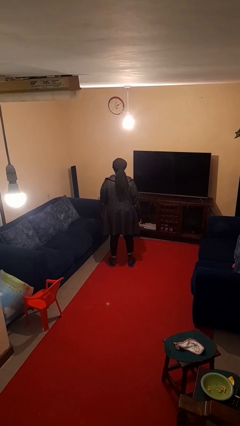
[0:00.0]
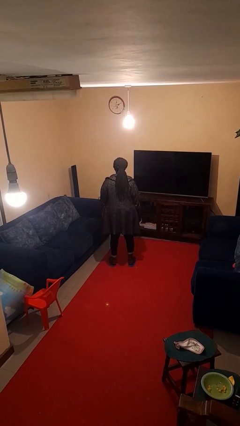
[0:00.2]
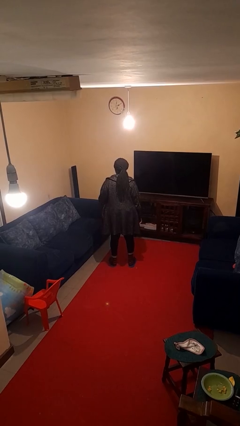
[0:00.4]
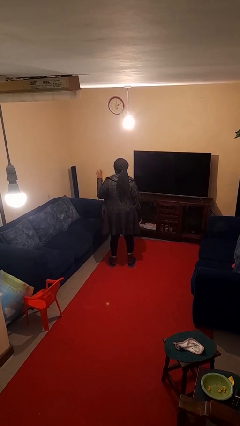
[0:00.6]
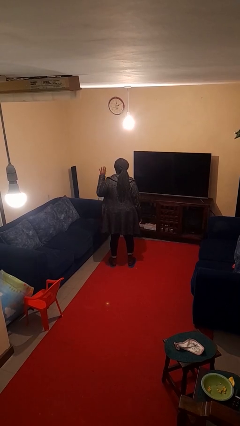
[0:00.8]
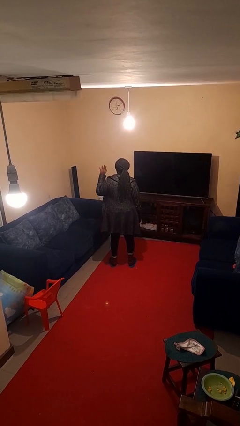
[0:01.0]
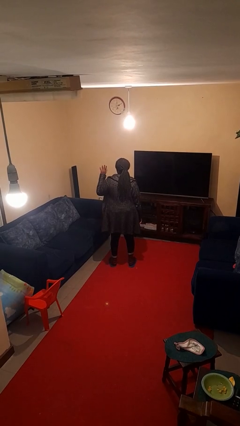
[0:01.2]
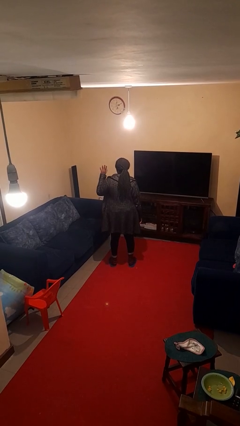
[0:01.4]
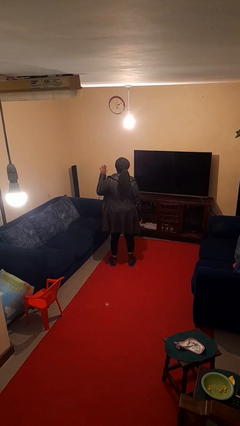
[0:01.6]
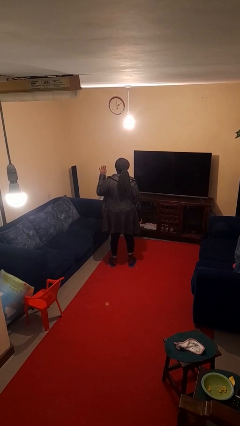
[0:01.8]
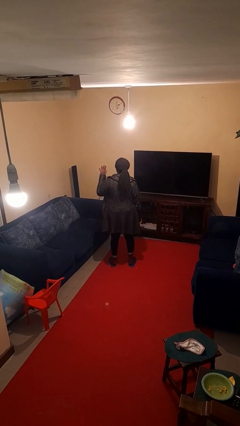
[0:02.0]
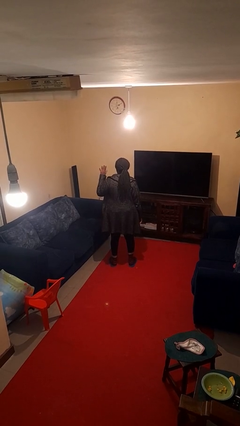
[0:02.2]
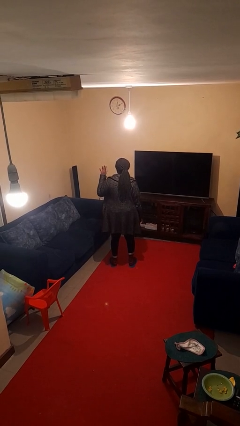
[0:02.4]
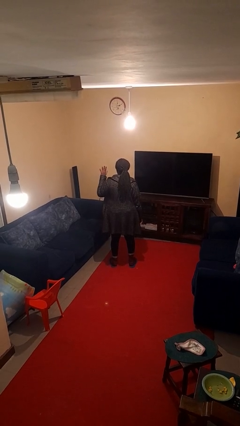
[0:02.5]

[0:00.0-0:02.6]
person gestures number five

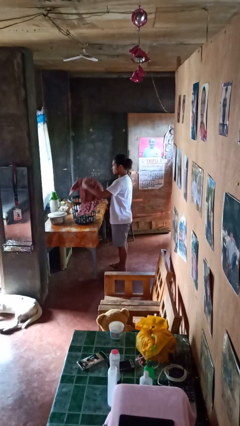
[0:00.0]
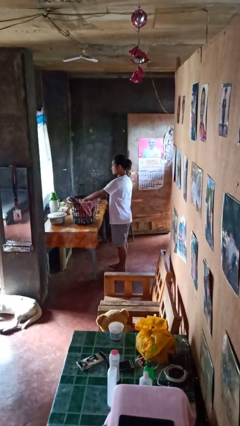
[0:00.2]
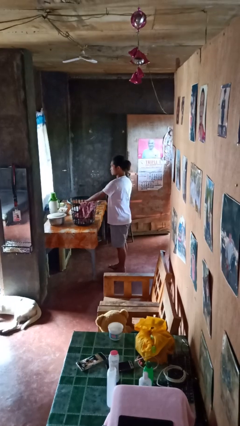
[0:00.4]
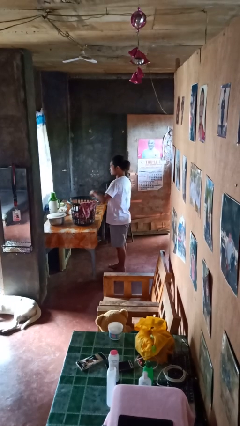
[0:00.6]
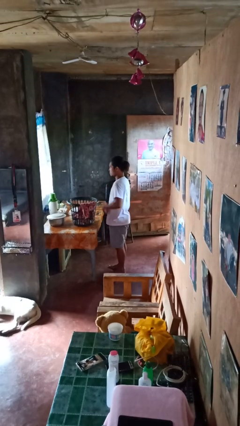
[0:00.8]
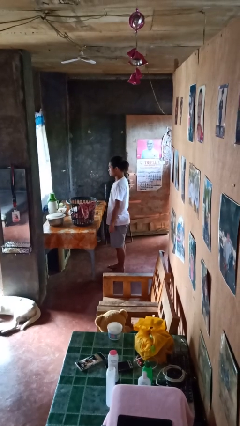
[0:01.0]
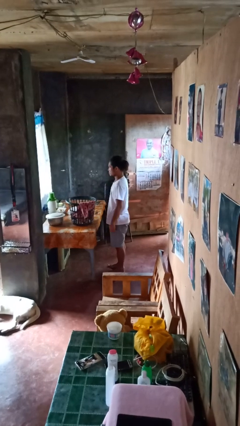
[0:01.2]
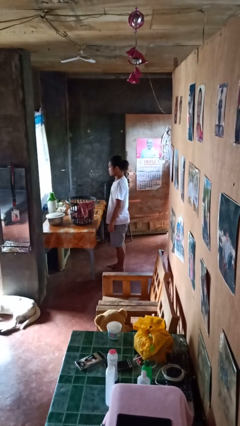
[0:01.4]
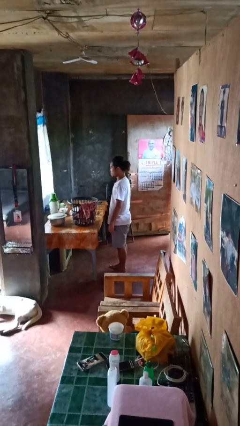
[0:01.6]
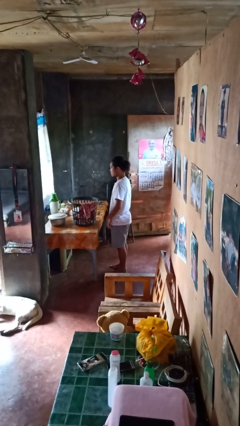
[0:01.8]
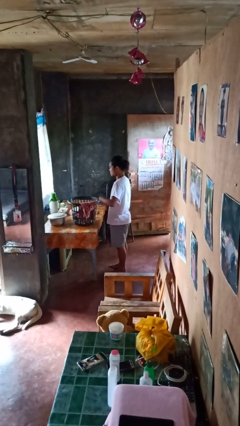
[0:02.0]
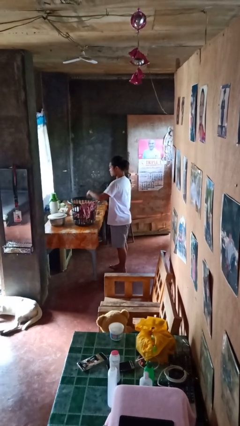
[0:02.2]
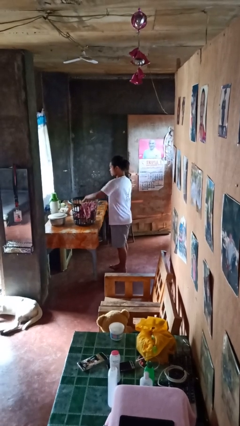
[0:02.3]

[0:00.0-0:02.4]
person puts object into basket

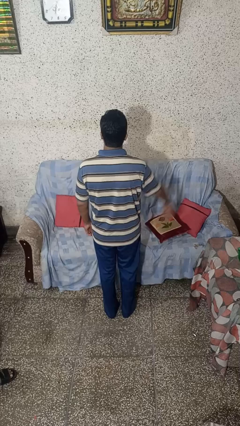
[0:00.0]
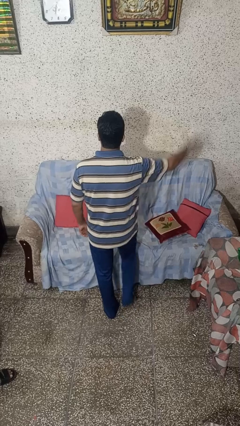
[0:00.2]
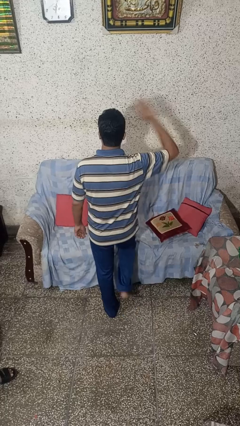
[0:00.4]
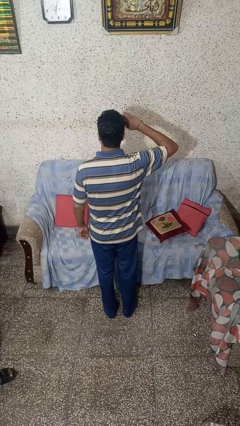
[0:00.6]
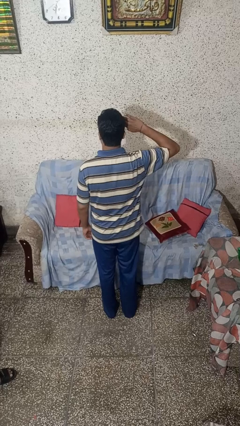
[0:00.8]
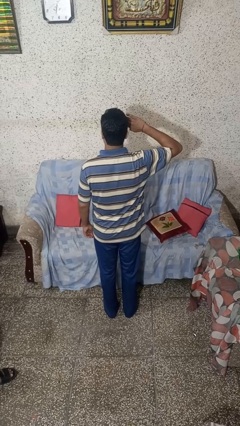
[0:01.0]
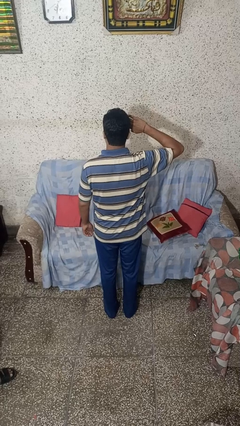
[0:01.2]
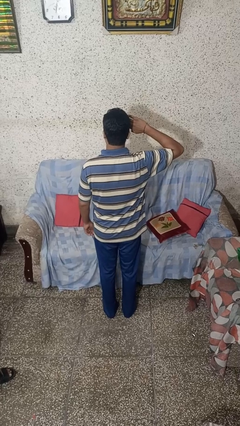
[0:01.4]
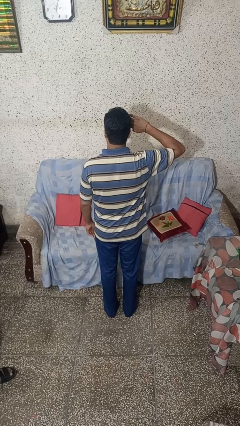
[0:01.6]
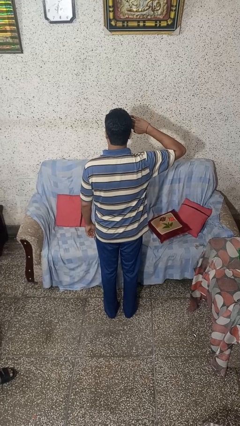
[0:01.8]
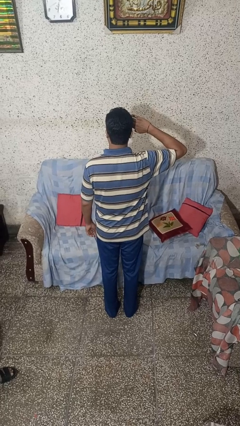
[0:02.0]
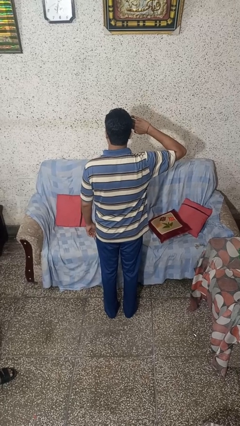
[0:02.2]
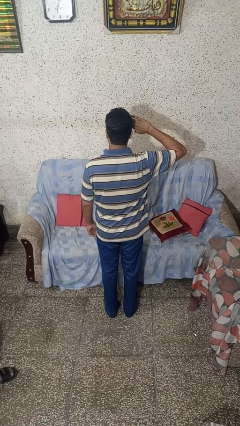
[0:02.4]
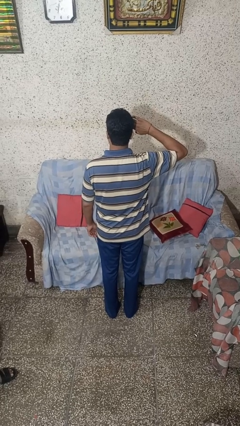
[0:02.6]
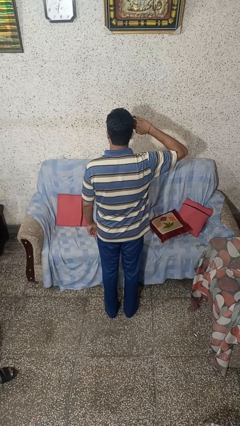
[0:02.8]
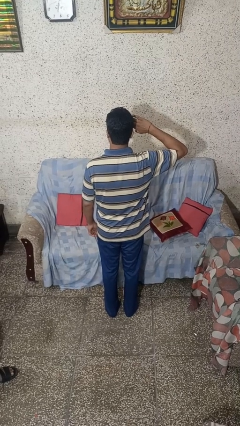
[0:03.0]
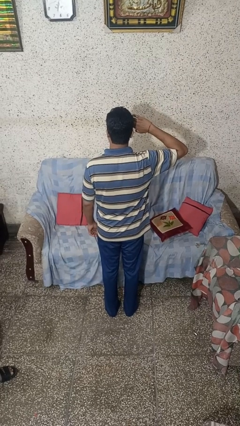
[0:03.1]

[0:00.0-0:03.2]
person salutes

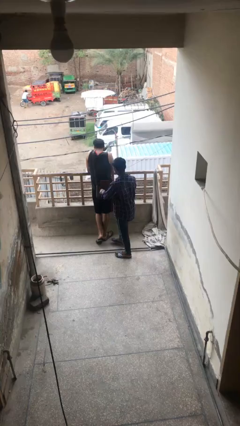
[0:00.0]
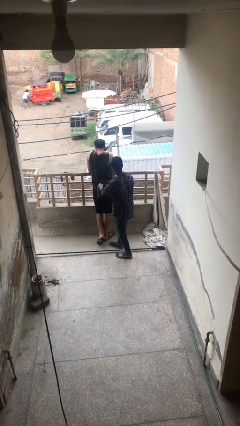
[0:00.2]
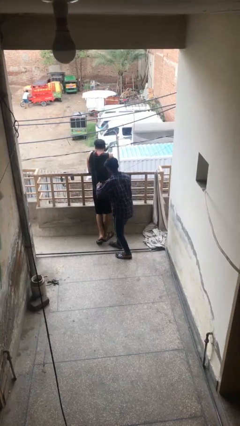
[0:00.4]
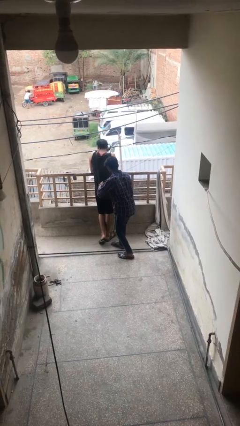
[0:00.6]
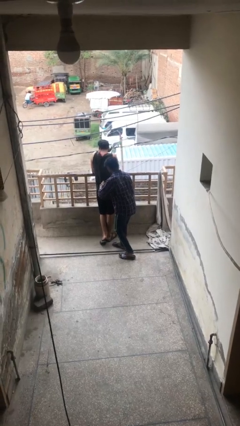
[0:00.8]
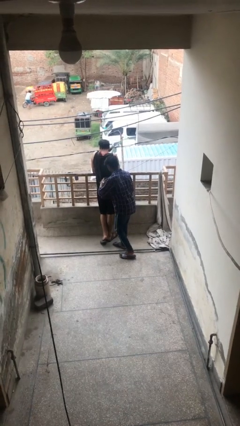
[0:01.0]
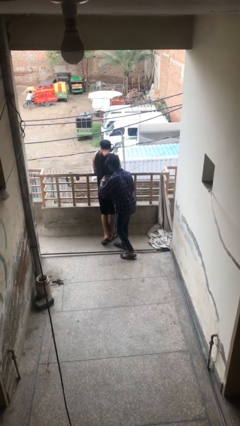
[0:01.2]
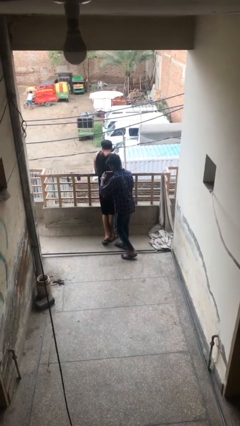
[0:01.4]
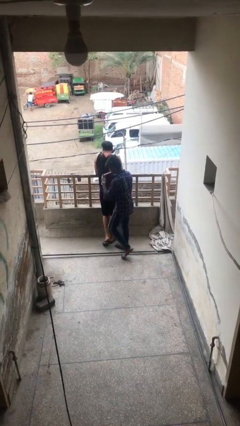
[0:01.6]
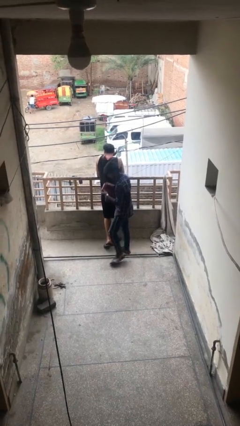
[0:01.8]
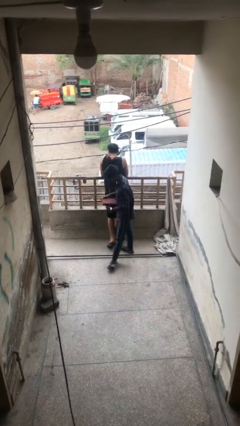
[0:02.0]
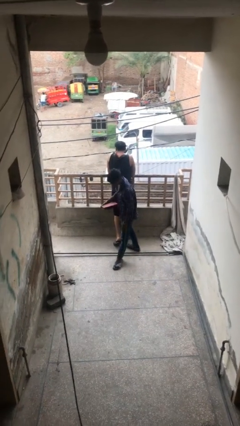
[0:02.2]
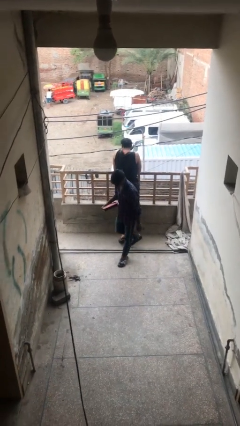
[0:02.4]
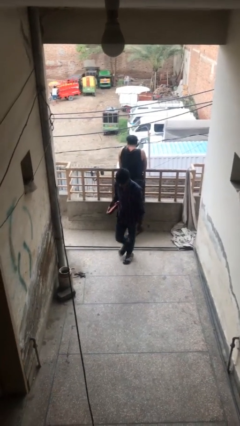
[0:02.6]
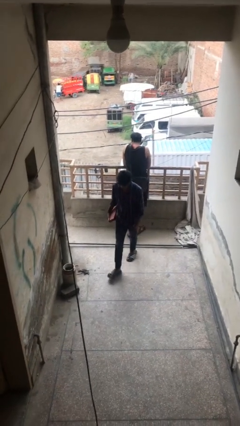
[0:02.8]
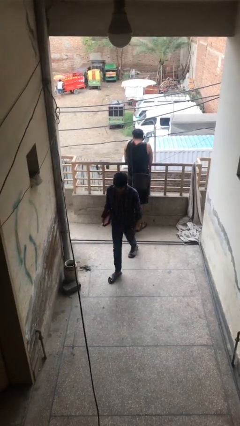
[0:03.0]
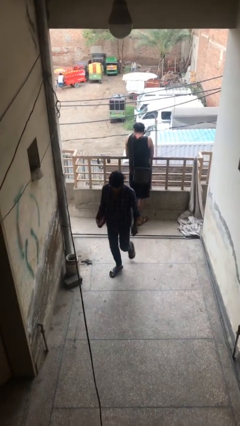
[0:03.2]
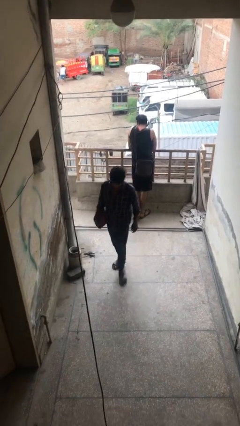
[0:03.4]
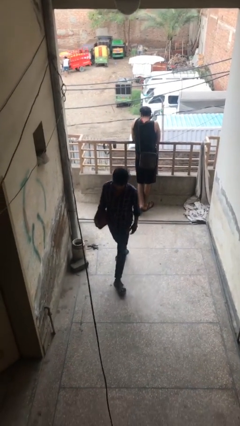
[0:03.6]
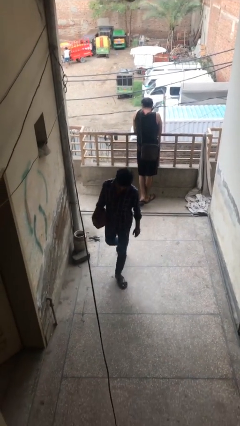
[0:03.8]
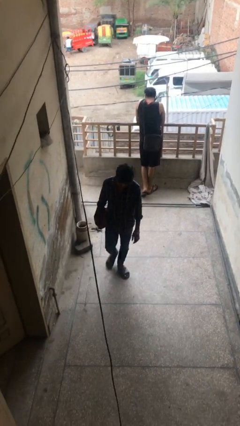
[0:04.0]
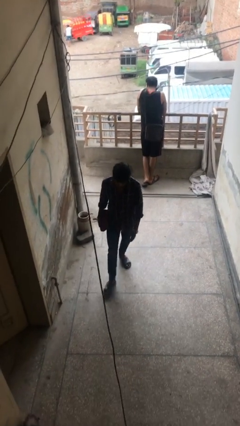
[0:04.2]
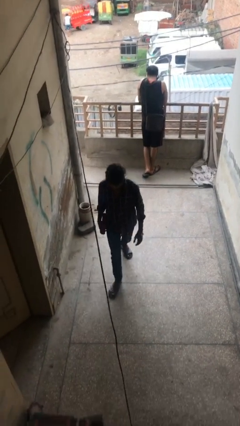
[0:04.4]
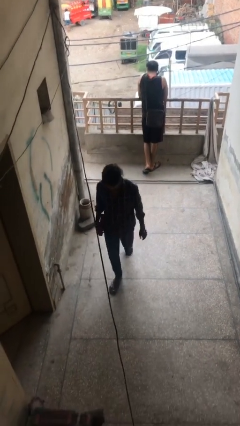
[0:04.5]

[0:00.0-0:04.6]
person steals object from person

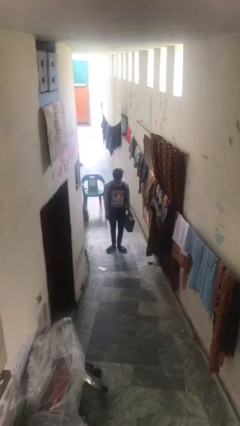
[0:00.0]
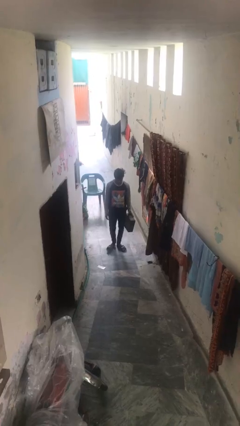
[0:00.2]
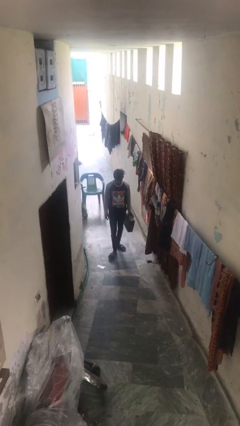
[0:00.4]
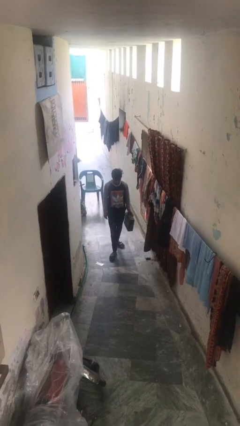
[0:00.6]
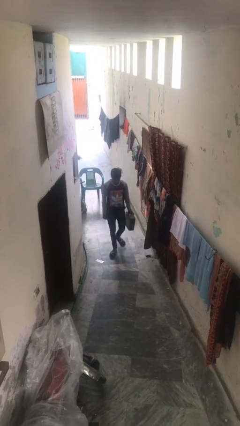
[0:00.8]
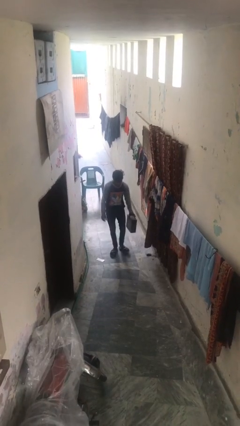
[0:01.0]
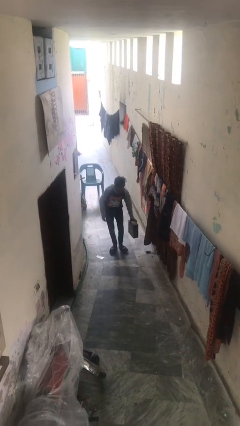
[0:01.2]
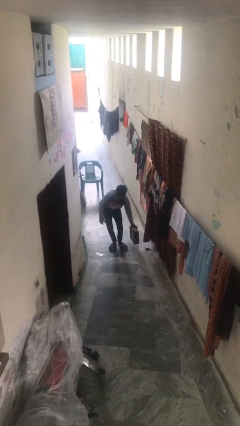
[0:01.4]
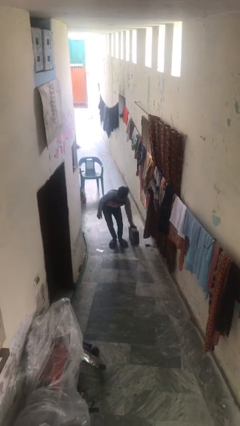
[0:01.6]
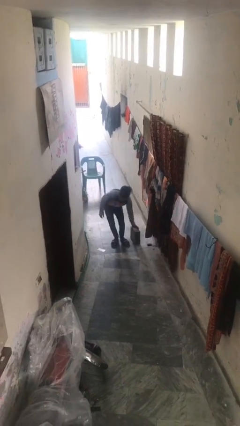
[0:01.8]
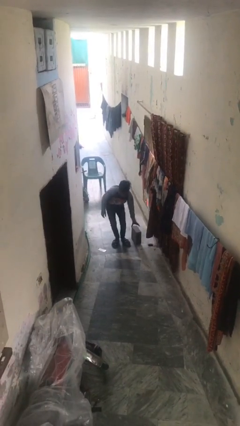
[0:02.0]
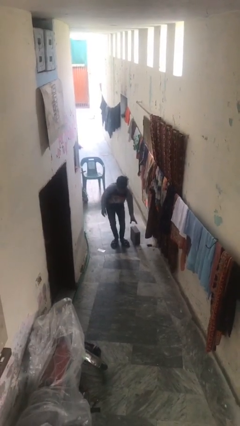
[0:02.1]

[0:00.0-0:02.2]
person puts down object on floor

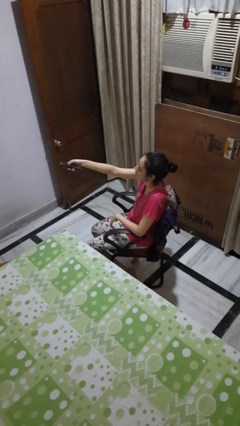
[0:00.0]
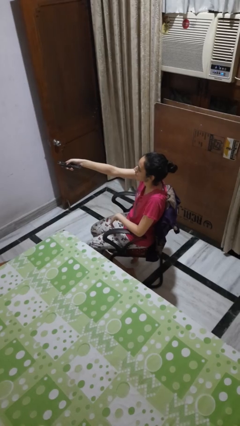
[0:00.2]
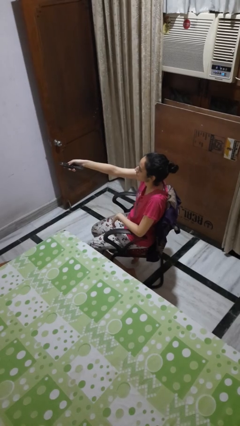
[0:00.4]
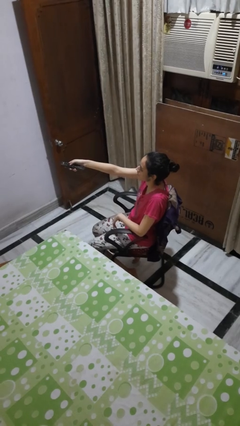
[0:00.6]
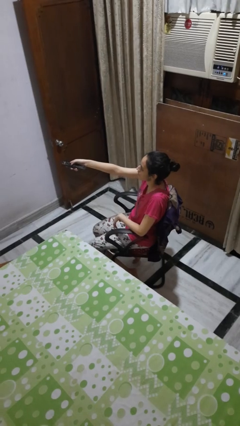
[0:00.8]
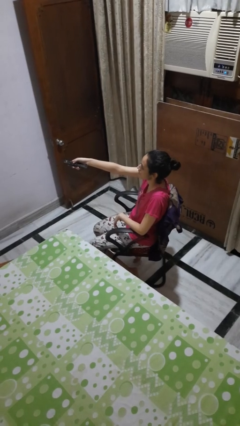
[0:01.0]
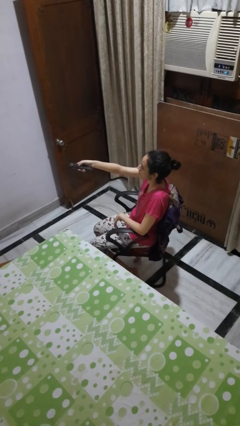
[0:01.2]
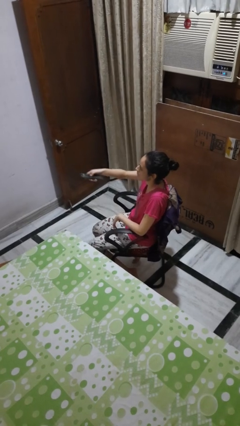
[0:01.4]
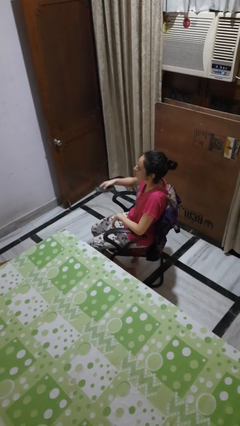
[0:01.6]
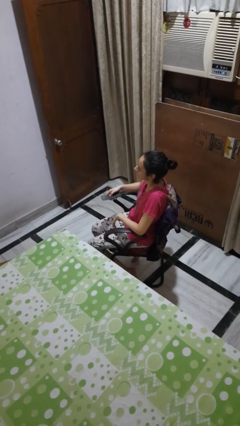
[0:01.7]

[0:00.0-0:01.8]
person uses television remote

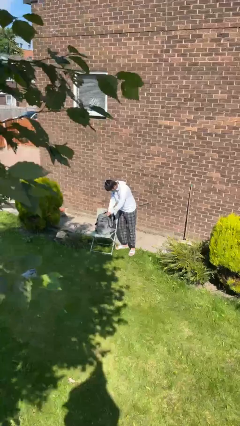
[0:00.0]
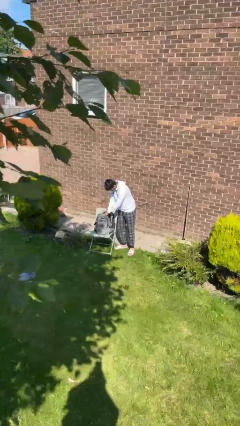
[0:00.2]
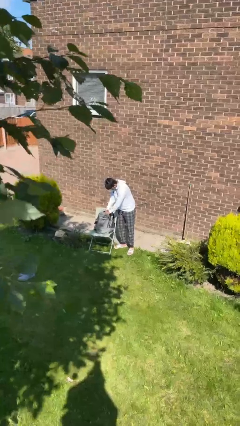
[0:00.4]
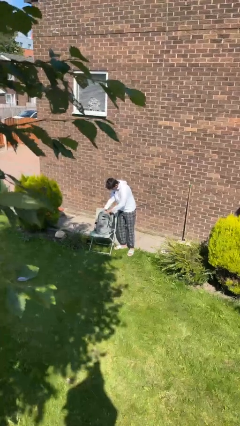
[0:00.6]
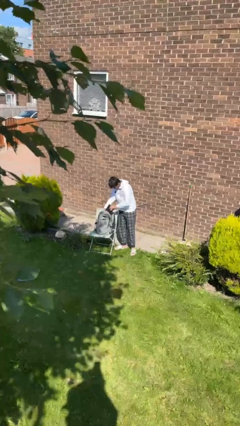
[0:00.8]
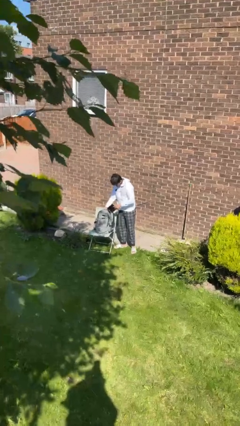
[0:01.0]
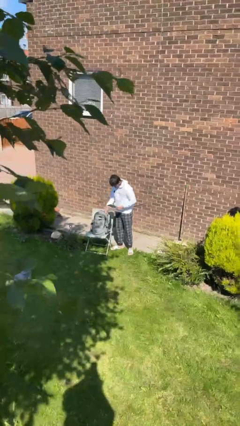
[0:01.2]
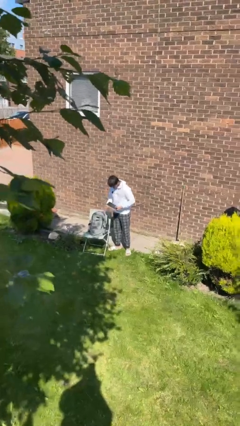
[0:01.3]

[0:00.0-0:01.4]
person takes object from backpack
